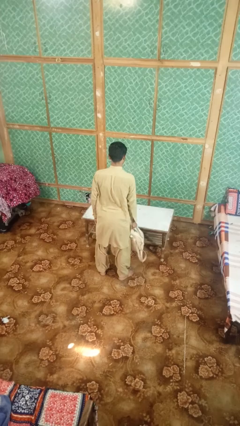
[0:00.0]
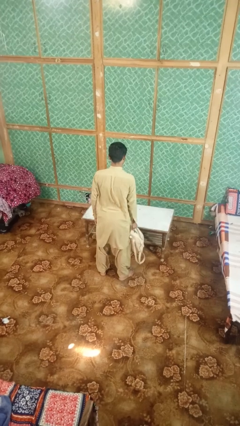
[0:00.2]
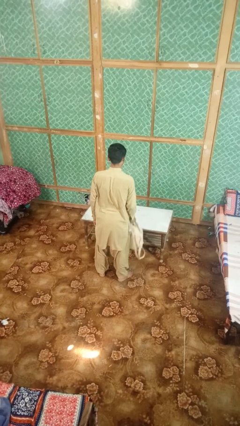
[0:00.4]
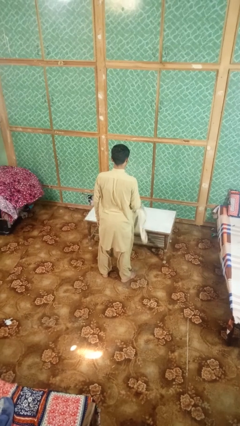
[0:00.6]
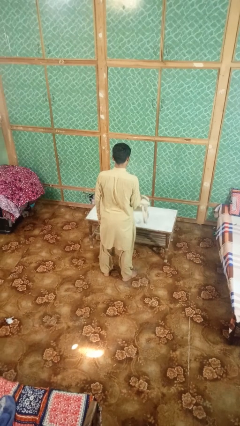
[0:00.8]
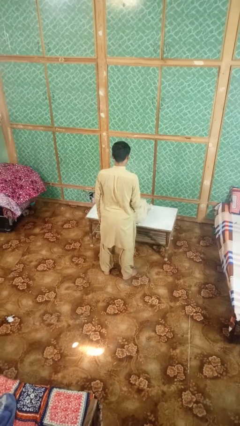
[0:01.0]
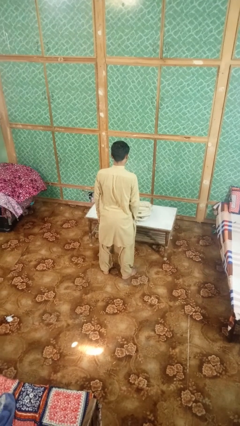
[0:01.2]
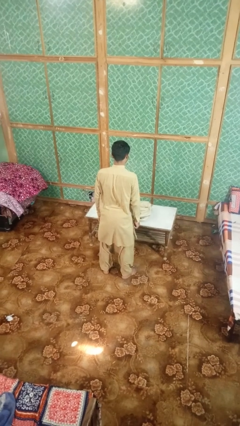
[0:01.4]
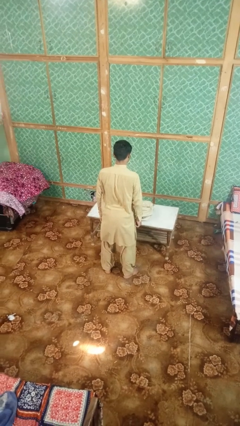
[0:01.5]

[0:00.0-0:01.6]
person throws object on table

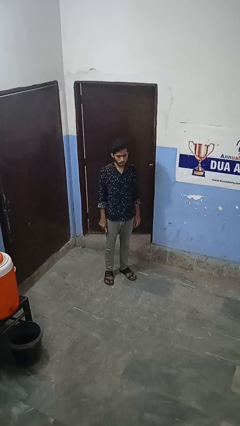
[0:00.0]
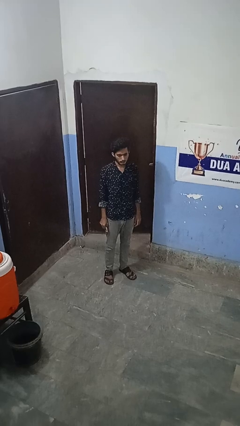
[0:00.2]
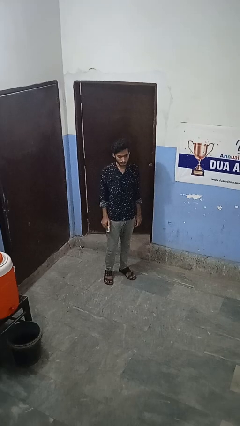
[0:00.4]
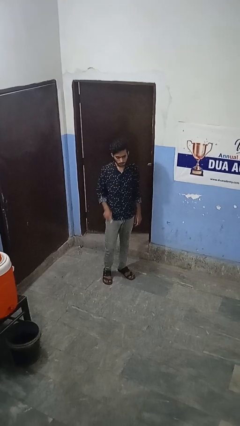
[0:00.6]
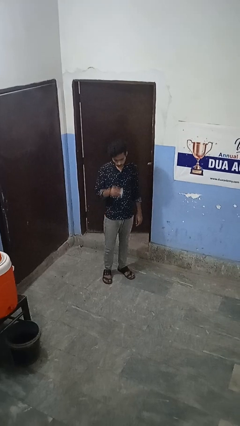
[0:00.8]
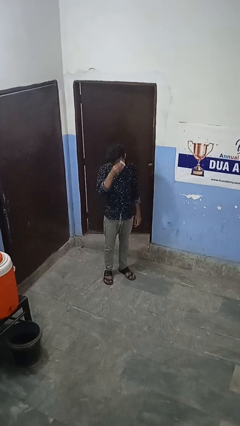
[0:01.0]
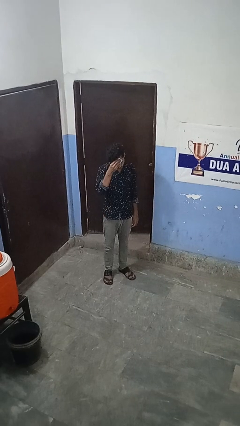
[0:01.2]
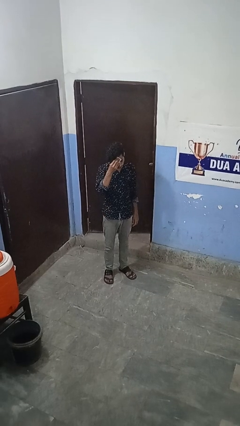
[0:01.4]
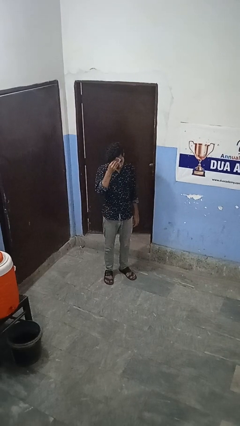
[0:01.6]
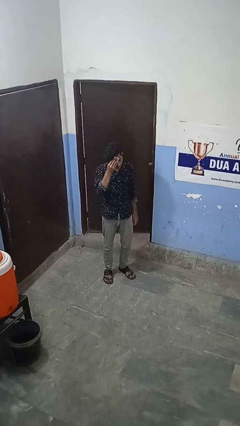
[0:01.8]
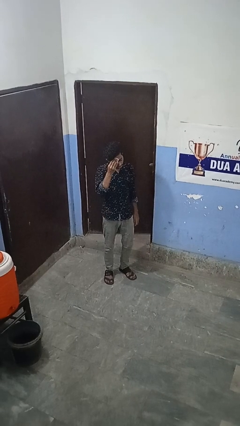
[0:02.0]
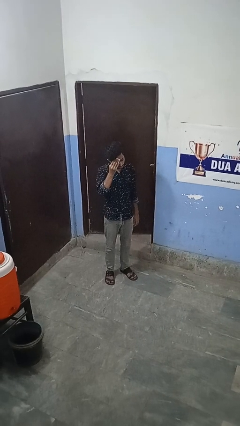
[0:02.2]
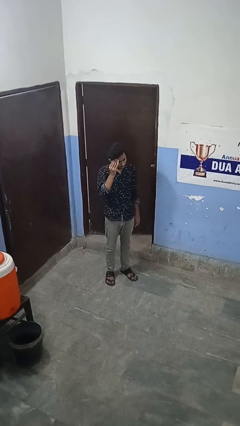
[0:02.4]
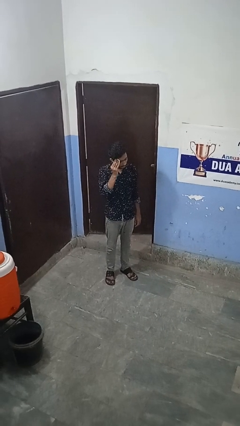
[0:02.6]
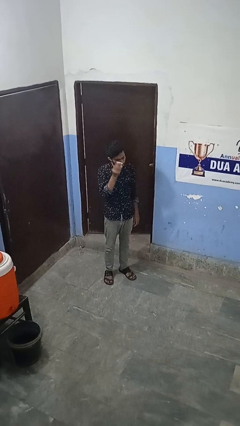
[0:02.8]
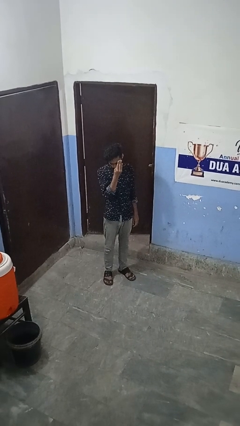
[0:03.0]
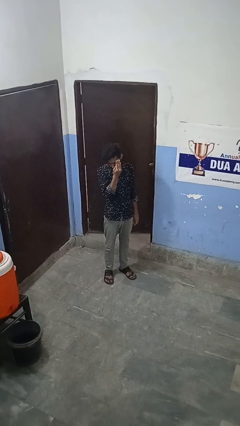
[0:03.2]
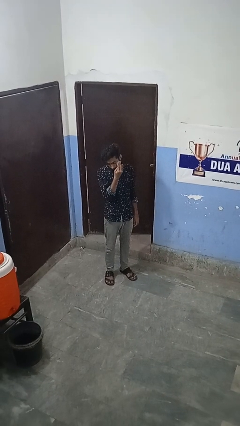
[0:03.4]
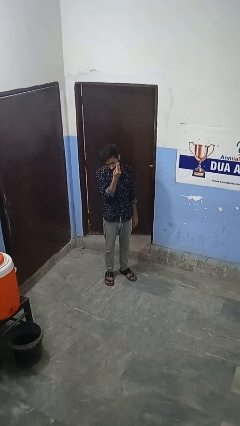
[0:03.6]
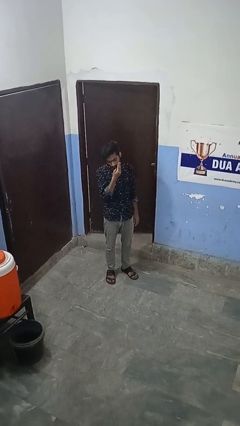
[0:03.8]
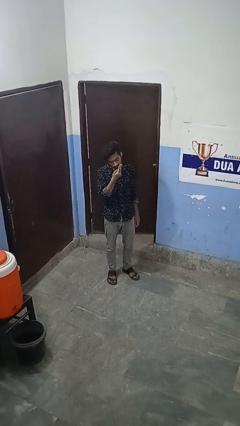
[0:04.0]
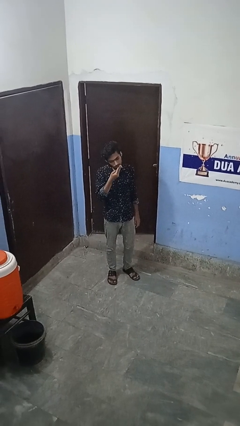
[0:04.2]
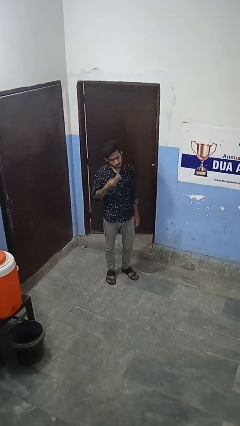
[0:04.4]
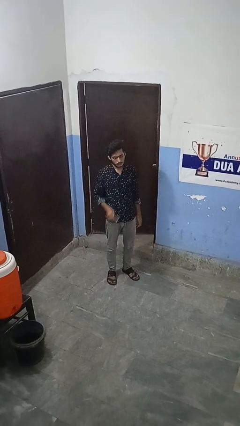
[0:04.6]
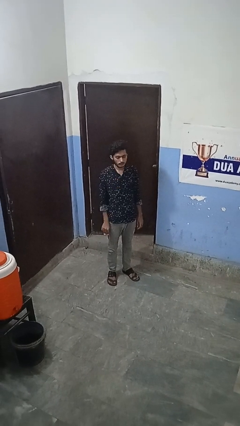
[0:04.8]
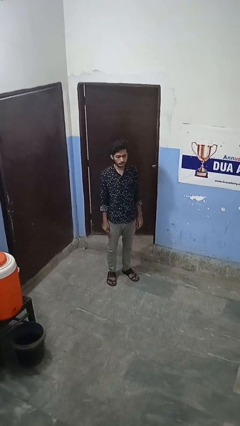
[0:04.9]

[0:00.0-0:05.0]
person wipes mouth with napkin

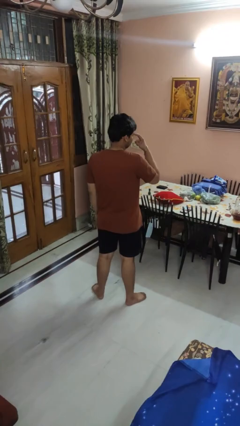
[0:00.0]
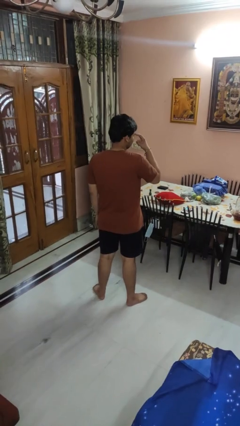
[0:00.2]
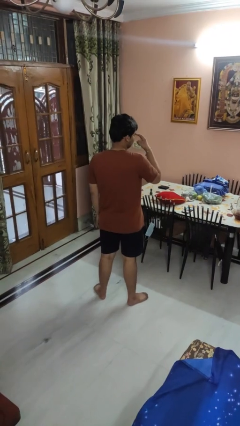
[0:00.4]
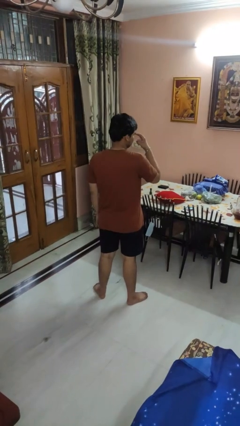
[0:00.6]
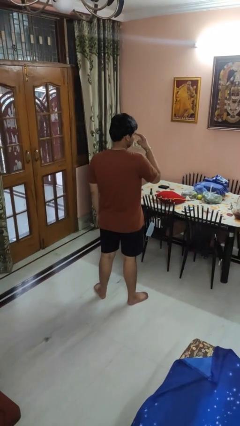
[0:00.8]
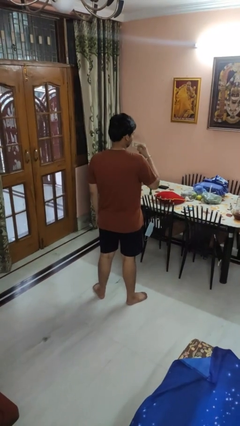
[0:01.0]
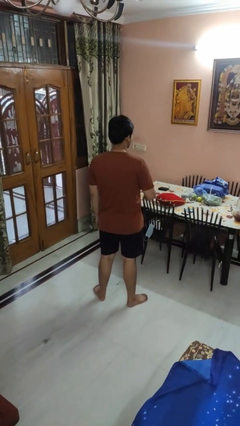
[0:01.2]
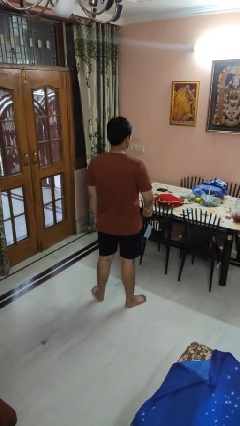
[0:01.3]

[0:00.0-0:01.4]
person gestures watch closely

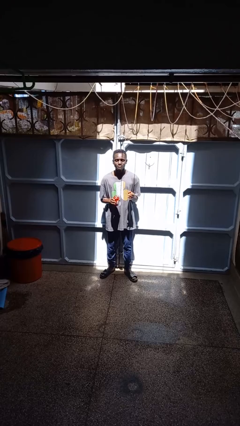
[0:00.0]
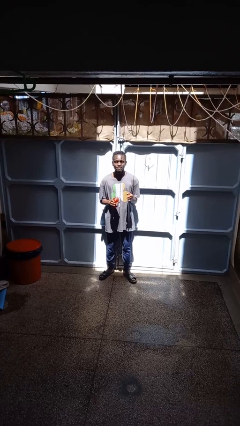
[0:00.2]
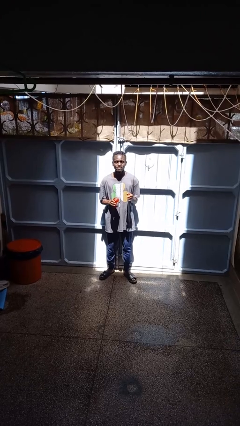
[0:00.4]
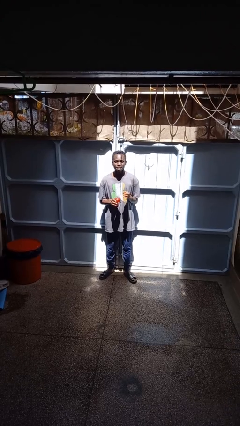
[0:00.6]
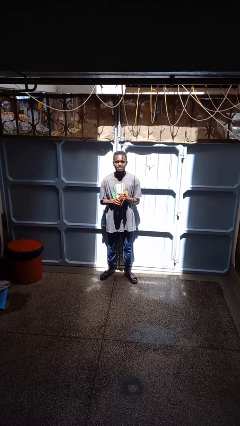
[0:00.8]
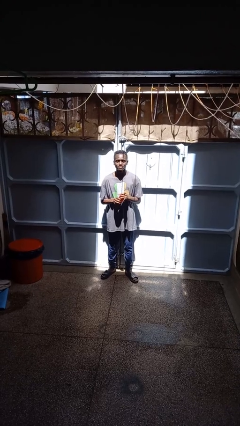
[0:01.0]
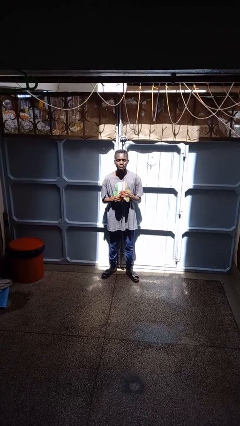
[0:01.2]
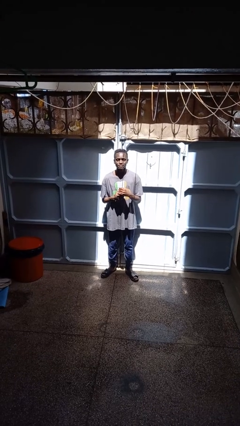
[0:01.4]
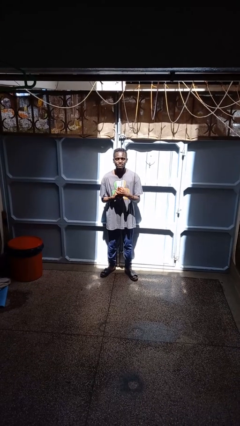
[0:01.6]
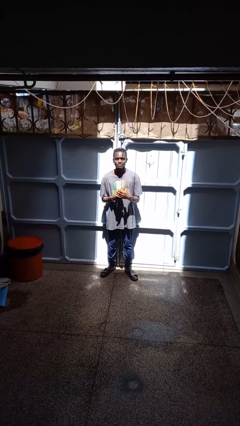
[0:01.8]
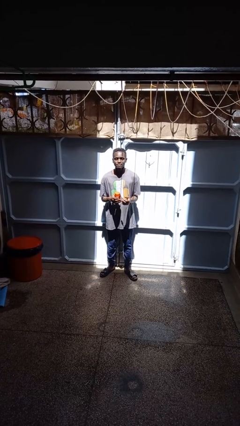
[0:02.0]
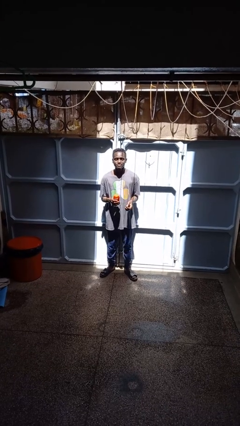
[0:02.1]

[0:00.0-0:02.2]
person closes jar

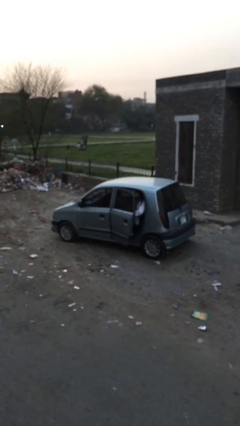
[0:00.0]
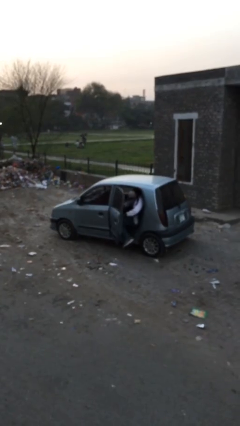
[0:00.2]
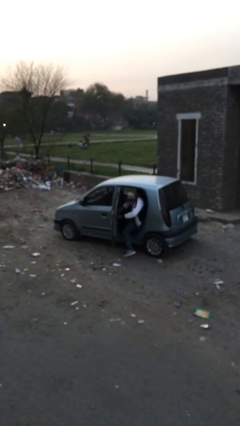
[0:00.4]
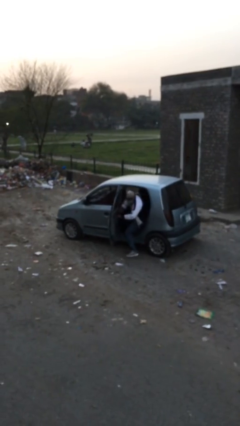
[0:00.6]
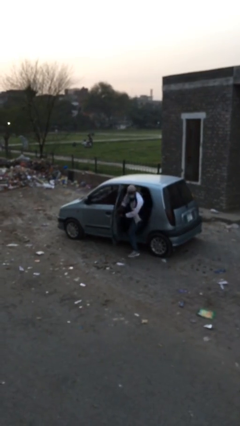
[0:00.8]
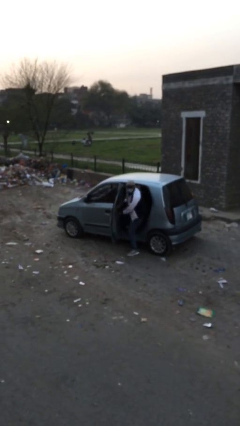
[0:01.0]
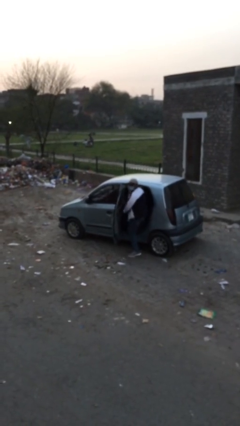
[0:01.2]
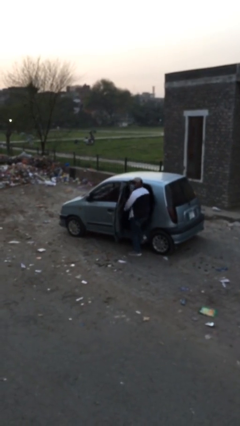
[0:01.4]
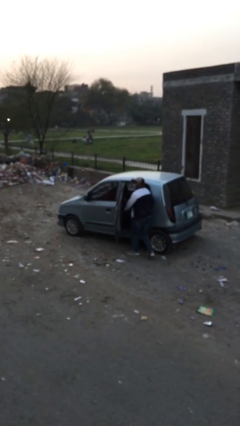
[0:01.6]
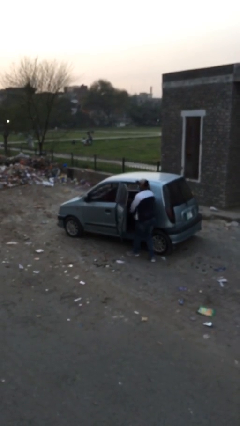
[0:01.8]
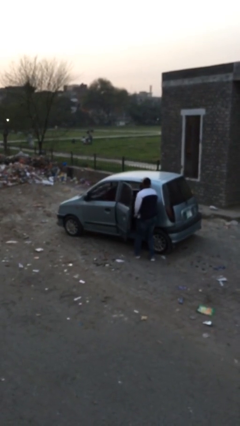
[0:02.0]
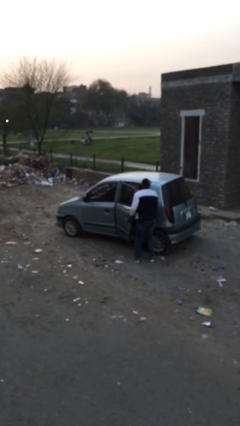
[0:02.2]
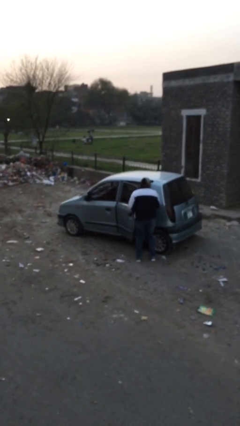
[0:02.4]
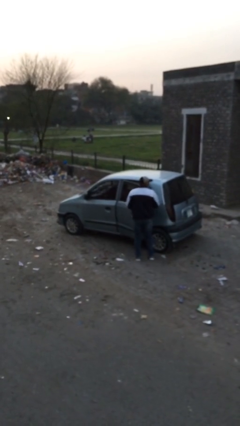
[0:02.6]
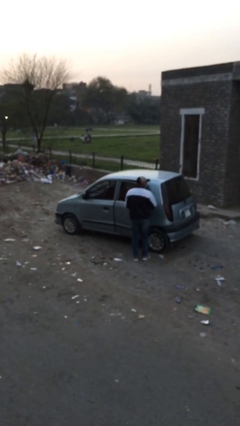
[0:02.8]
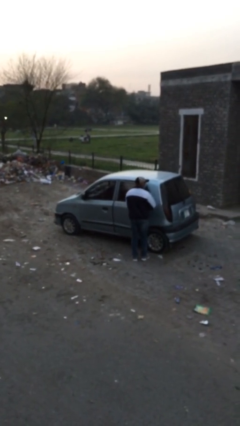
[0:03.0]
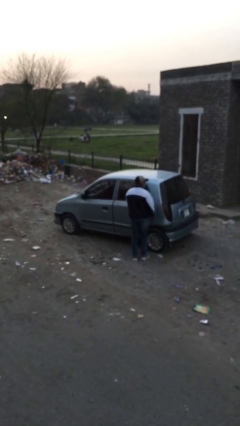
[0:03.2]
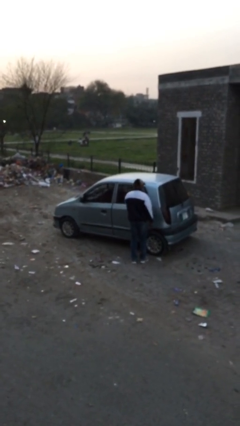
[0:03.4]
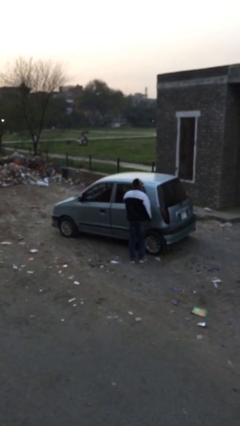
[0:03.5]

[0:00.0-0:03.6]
car drops off person

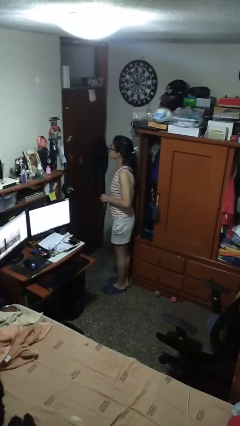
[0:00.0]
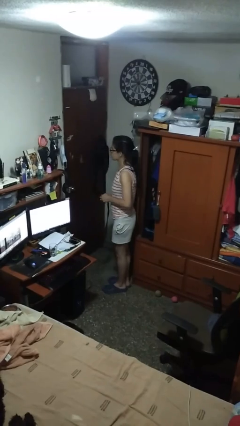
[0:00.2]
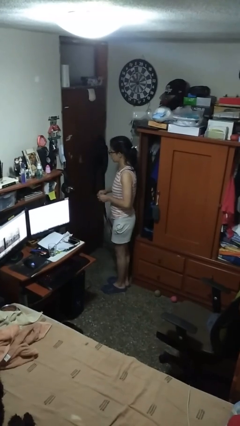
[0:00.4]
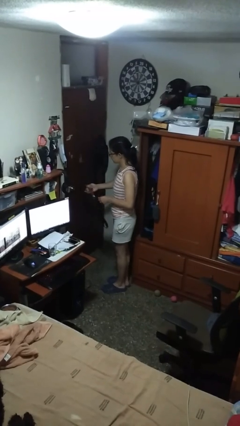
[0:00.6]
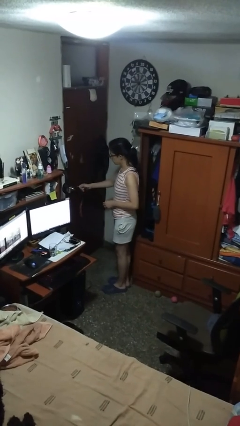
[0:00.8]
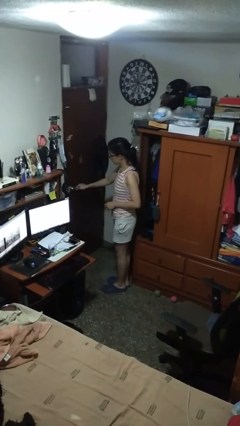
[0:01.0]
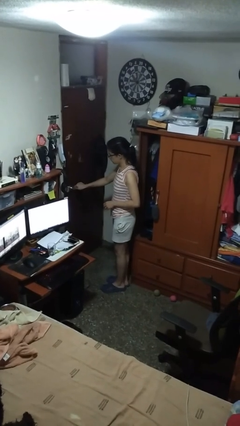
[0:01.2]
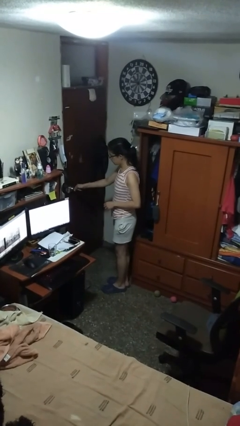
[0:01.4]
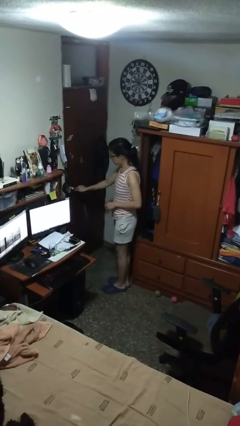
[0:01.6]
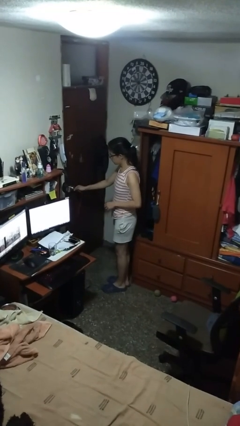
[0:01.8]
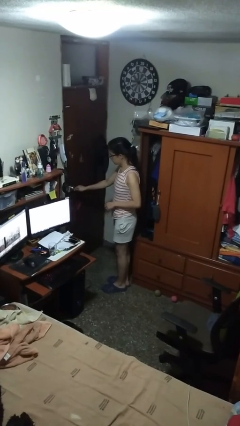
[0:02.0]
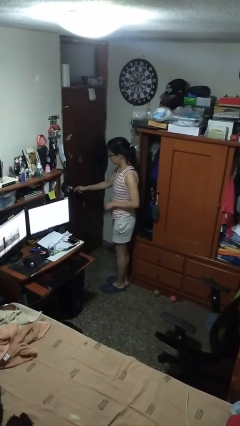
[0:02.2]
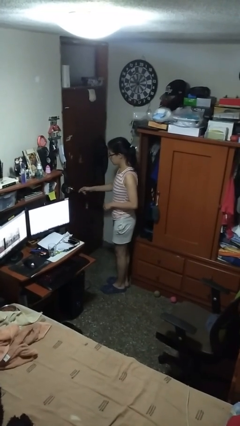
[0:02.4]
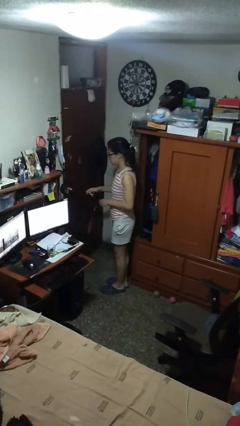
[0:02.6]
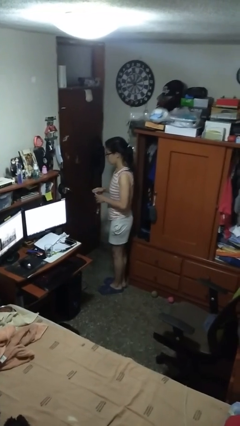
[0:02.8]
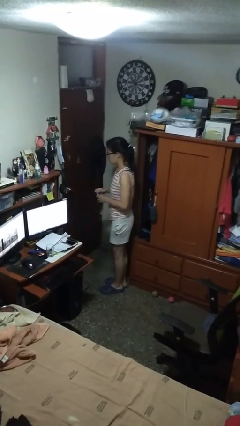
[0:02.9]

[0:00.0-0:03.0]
person locks door with keys

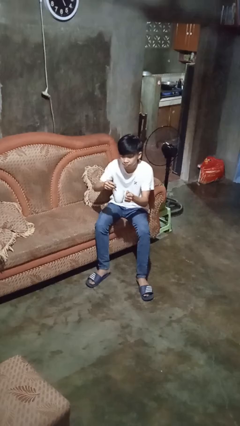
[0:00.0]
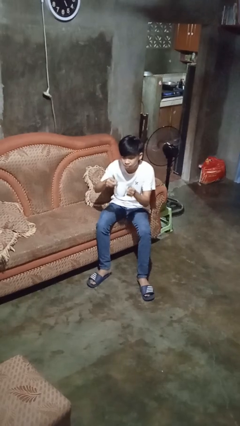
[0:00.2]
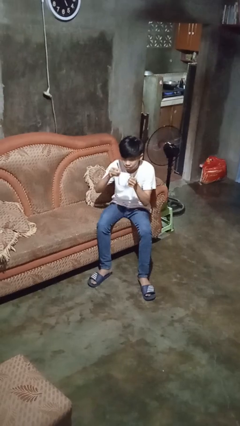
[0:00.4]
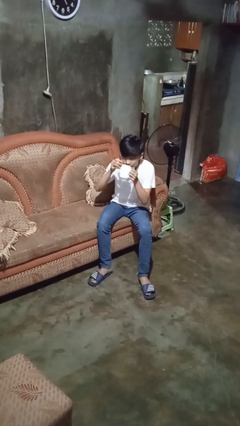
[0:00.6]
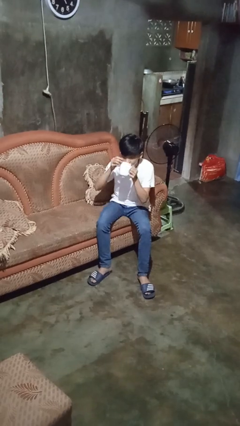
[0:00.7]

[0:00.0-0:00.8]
person drinks from mug
